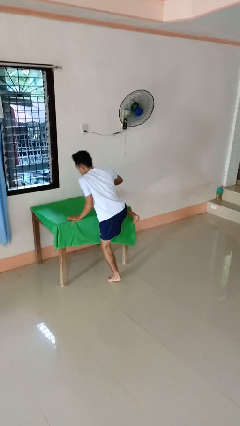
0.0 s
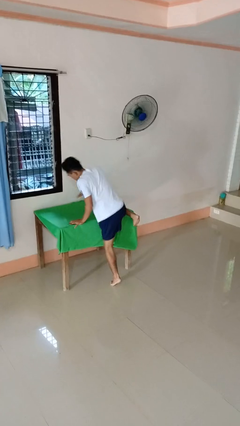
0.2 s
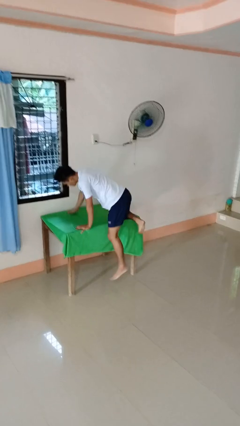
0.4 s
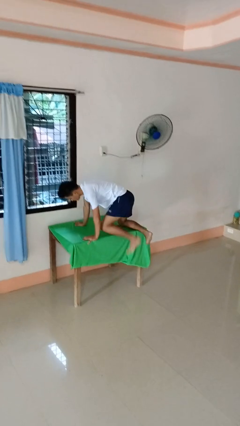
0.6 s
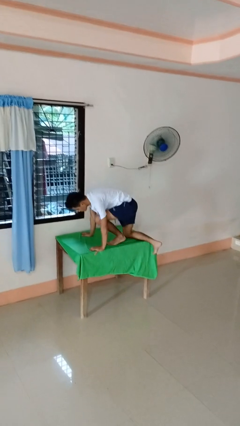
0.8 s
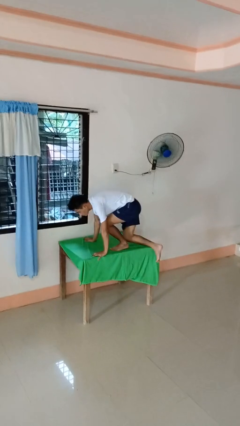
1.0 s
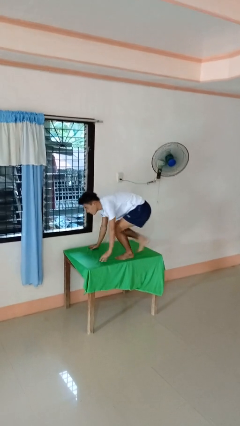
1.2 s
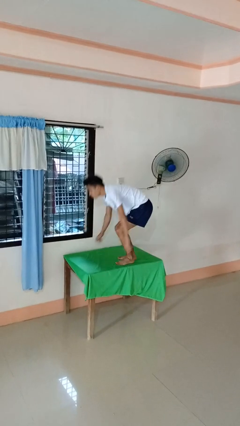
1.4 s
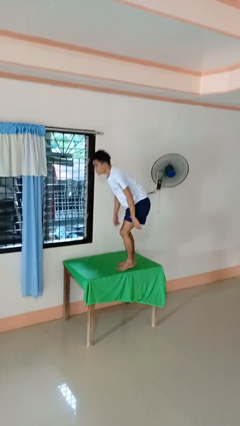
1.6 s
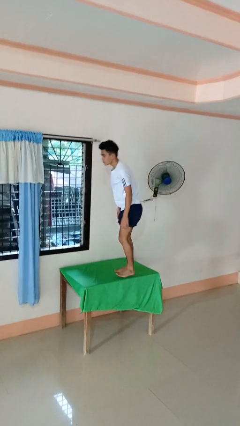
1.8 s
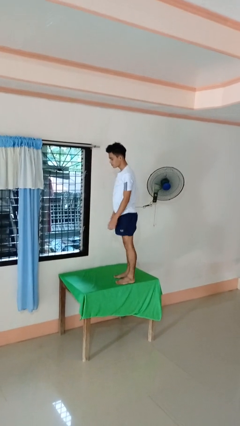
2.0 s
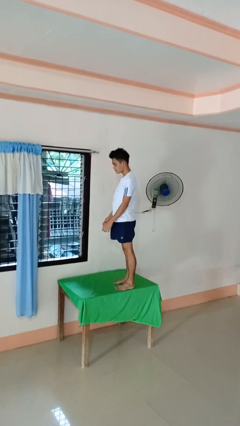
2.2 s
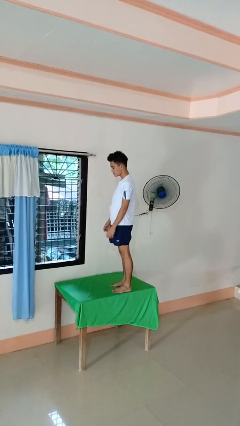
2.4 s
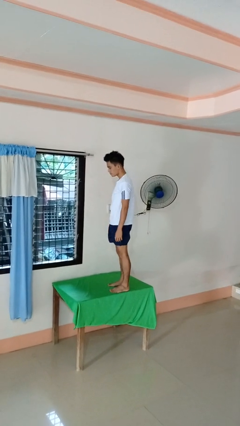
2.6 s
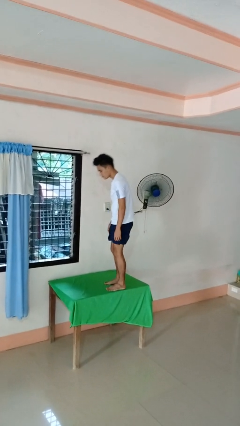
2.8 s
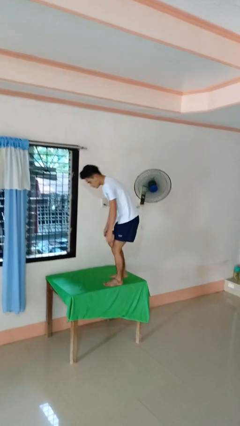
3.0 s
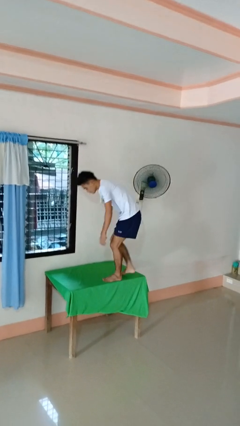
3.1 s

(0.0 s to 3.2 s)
person climbs on table

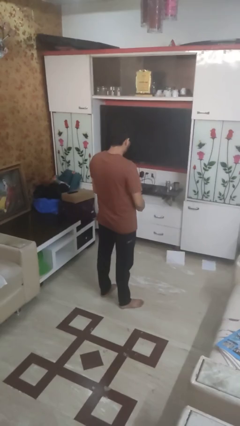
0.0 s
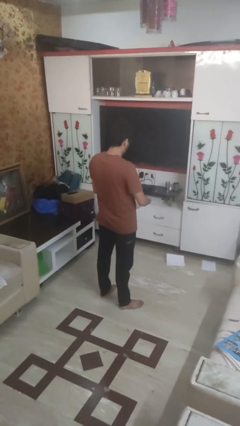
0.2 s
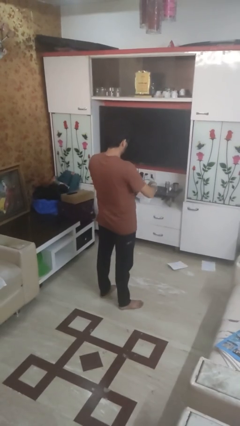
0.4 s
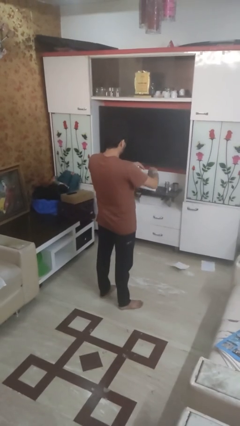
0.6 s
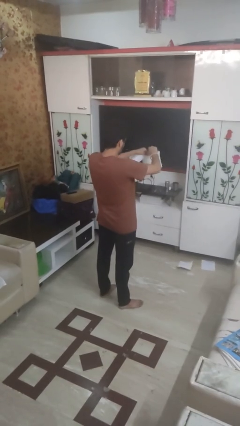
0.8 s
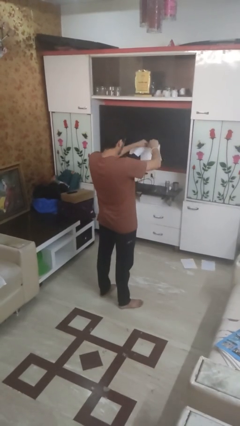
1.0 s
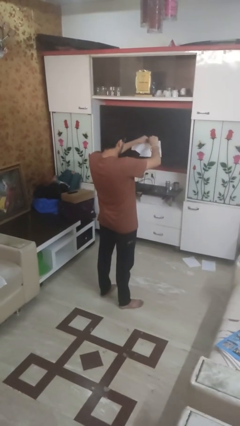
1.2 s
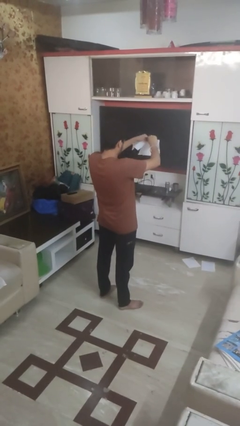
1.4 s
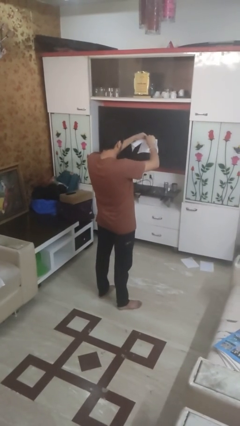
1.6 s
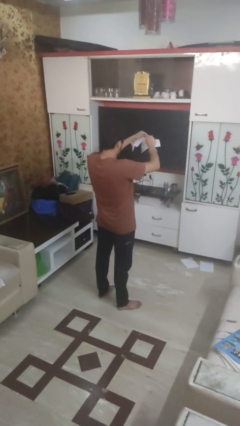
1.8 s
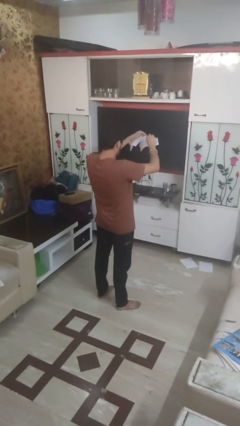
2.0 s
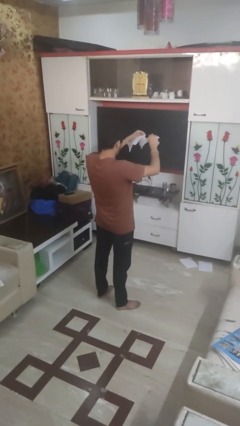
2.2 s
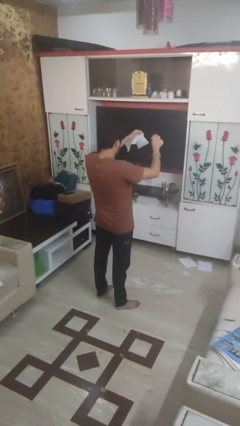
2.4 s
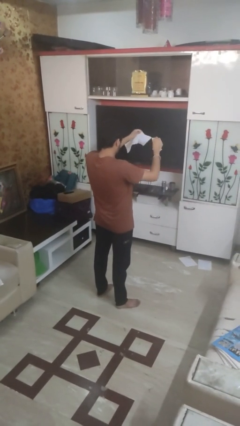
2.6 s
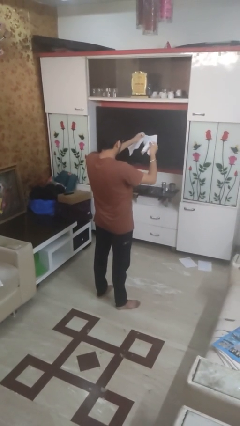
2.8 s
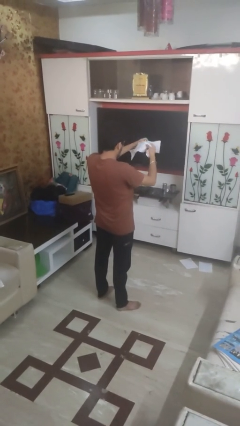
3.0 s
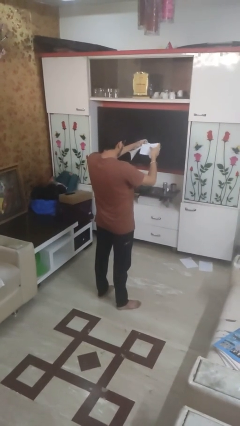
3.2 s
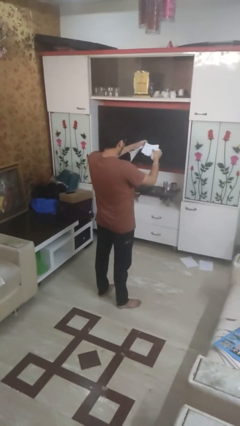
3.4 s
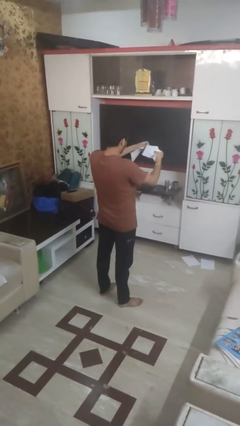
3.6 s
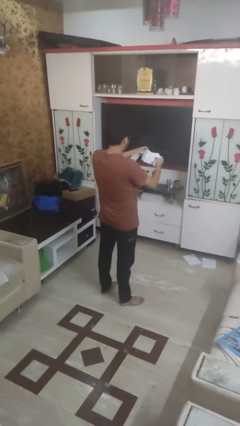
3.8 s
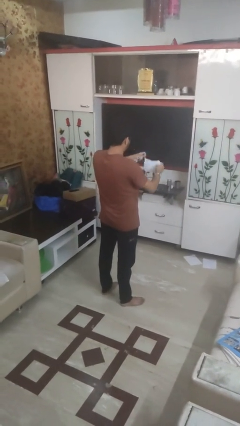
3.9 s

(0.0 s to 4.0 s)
person tears paper

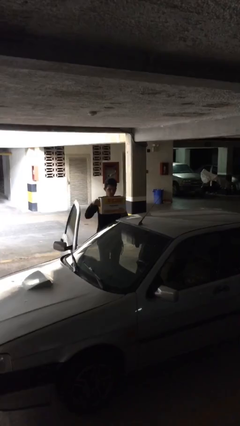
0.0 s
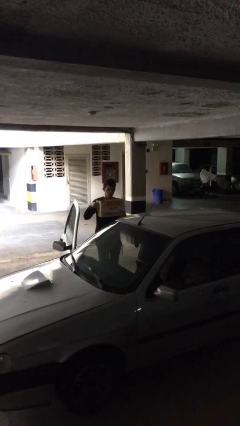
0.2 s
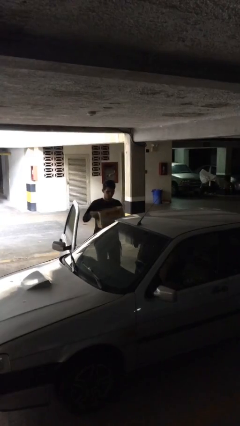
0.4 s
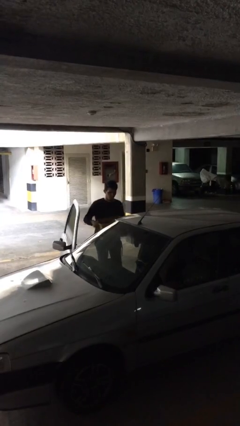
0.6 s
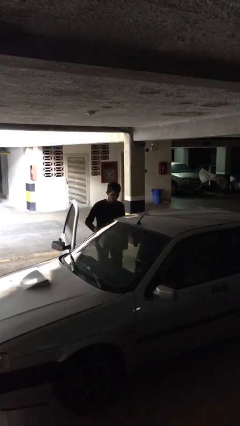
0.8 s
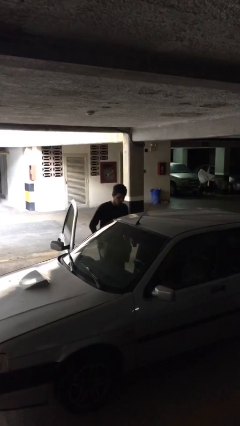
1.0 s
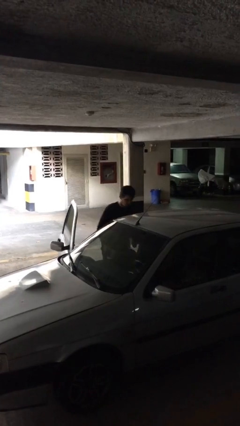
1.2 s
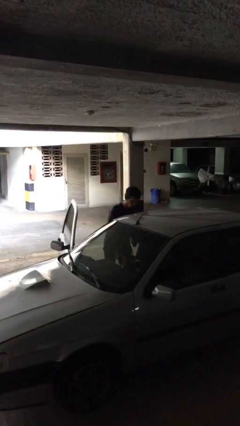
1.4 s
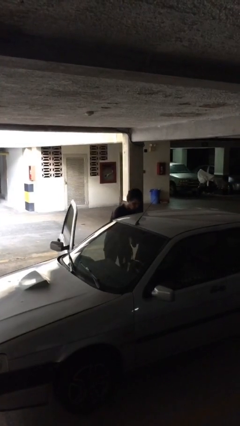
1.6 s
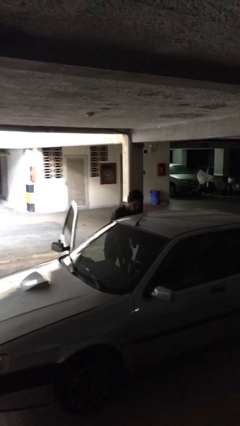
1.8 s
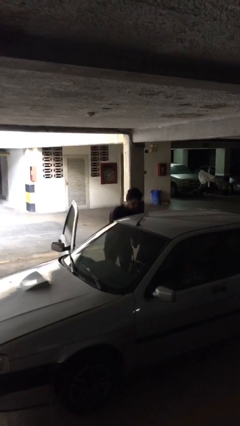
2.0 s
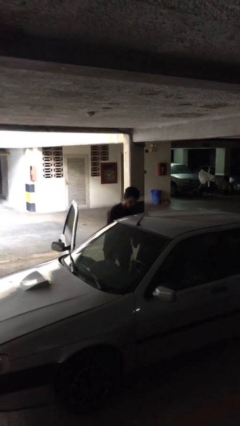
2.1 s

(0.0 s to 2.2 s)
person loads car

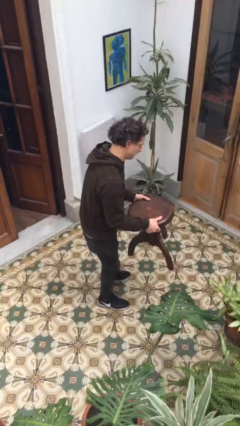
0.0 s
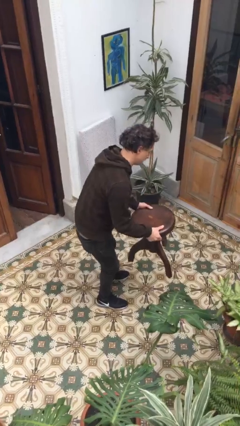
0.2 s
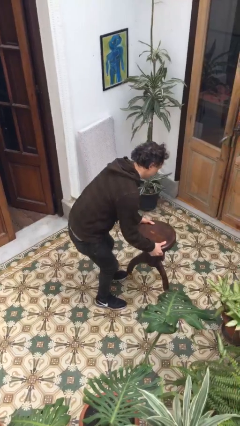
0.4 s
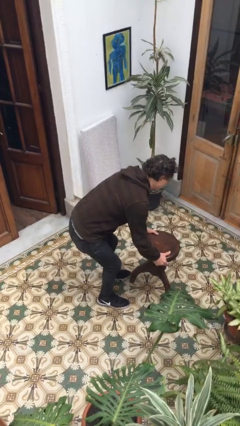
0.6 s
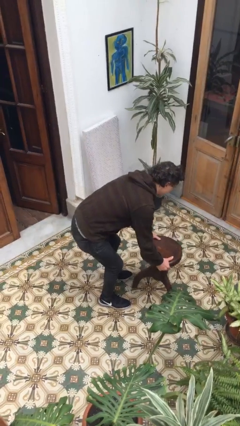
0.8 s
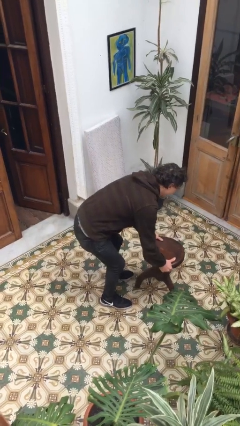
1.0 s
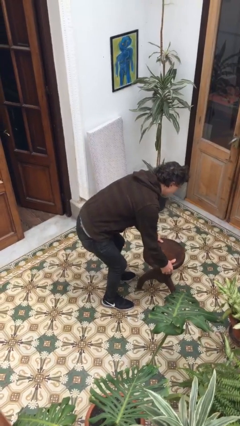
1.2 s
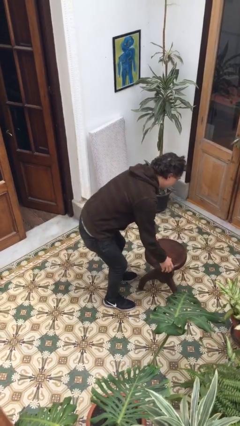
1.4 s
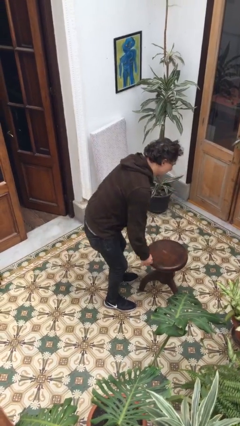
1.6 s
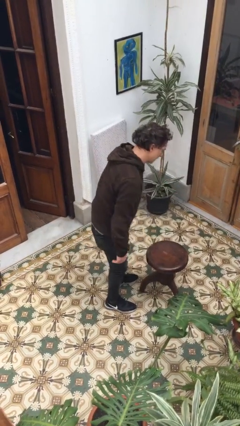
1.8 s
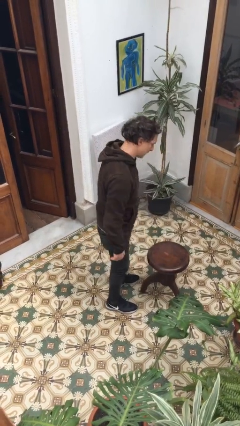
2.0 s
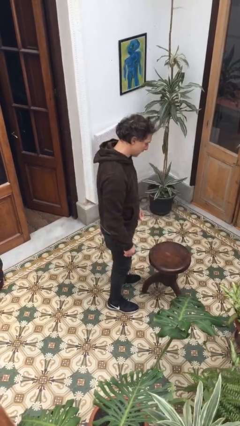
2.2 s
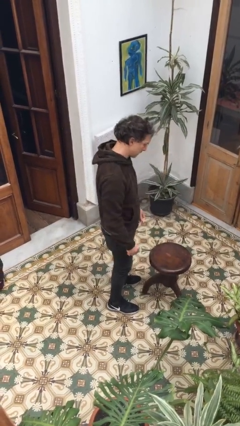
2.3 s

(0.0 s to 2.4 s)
person puts down object on floor

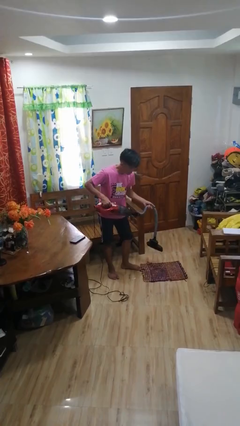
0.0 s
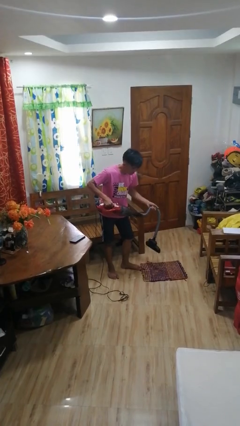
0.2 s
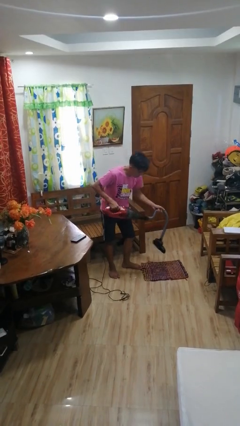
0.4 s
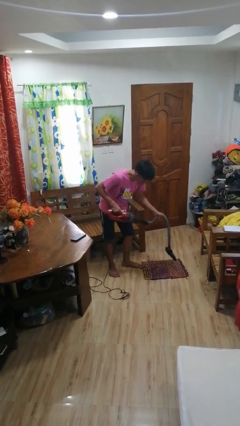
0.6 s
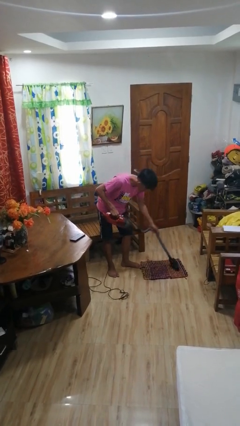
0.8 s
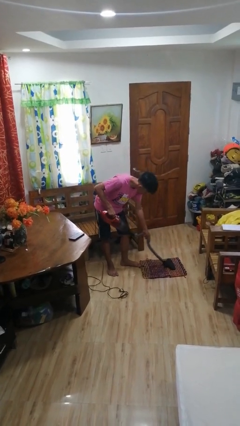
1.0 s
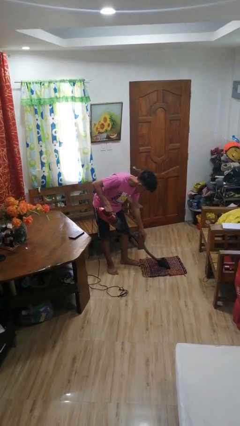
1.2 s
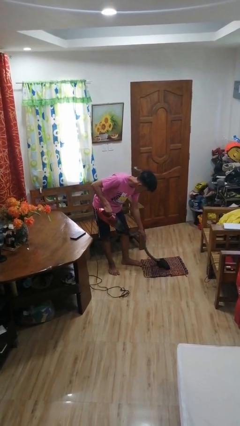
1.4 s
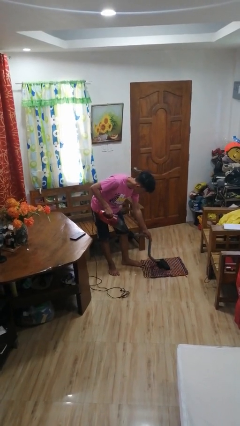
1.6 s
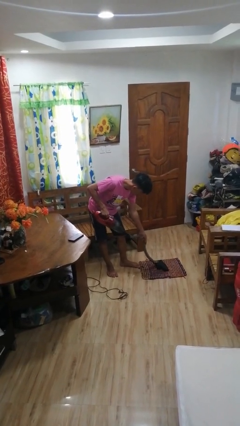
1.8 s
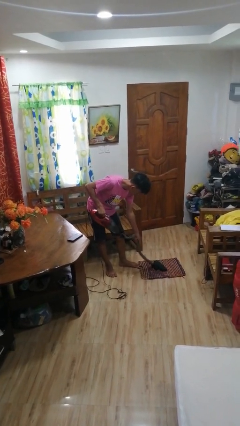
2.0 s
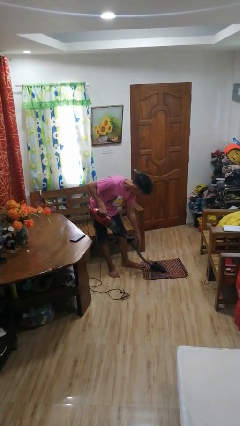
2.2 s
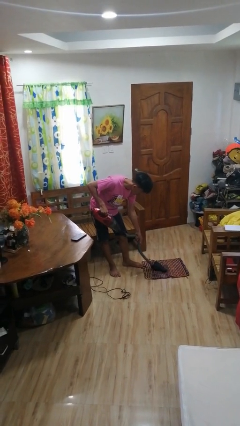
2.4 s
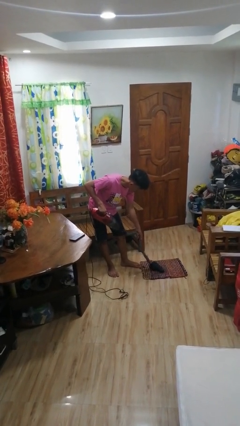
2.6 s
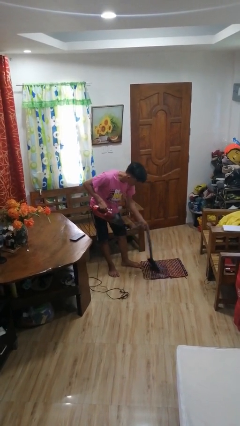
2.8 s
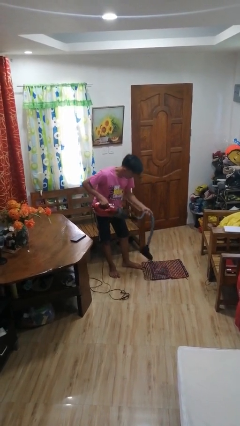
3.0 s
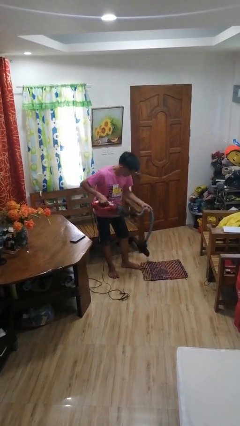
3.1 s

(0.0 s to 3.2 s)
person vacuums carpet

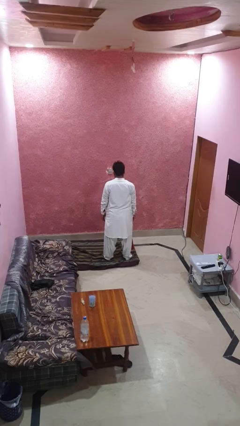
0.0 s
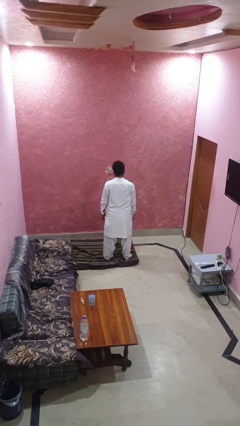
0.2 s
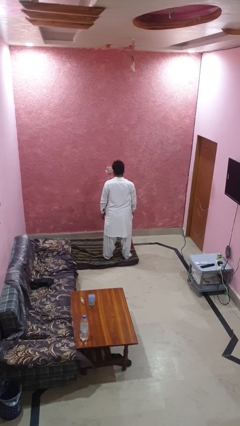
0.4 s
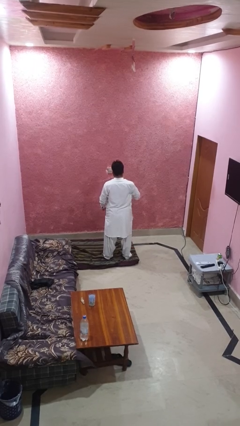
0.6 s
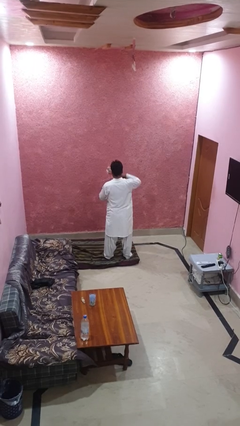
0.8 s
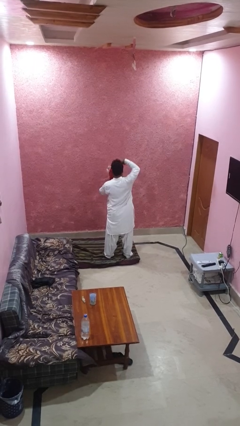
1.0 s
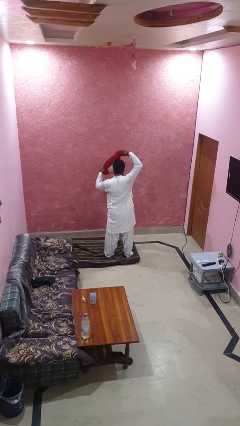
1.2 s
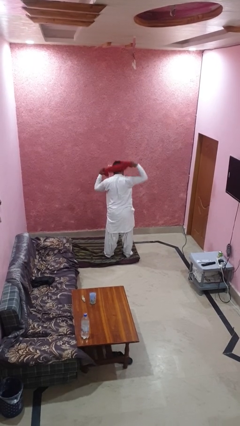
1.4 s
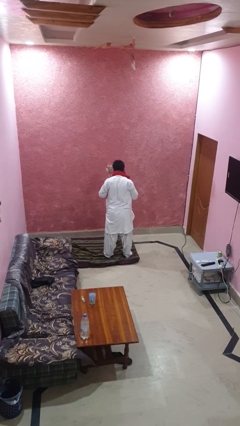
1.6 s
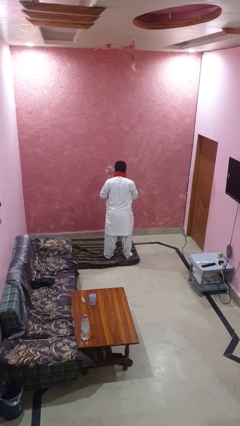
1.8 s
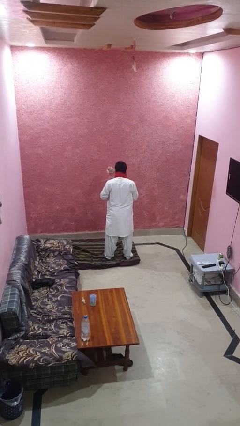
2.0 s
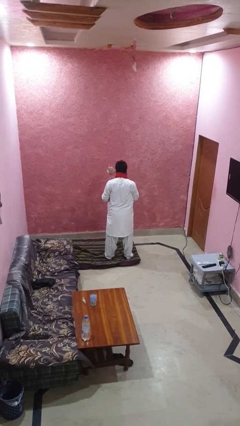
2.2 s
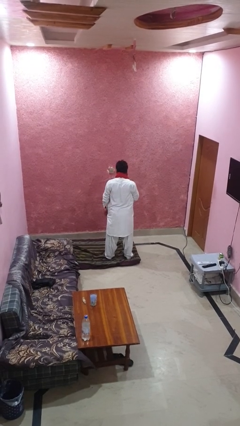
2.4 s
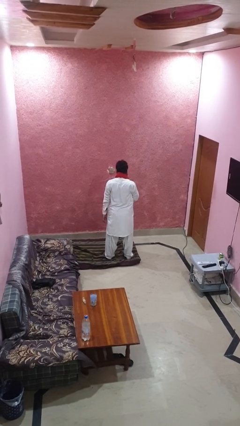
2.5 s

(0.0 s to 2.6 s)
person puts on scarf
